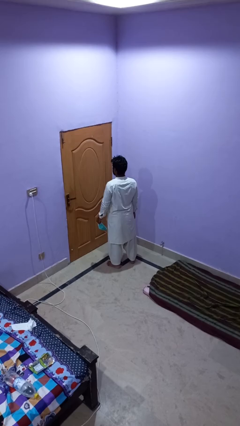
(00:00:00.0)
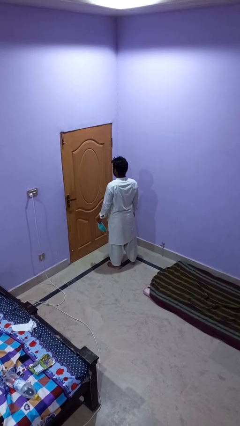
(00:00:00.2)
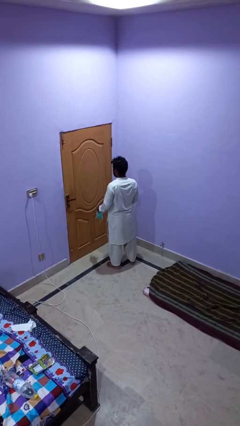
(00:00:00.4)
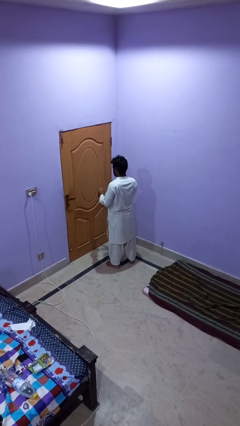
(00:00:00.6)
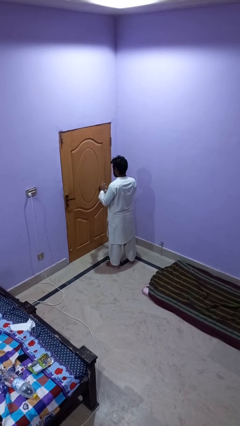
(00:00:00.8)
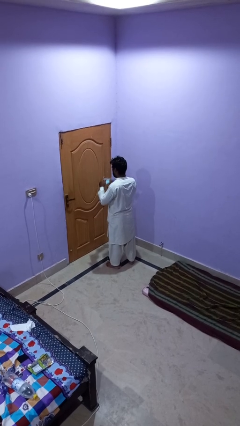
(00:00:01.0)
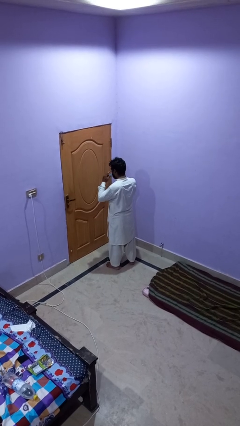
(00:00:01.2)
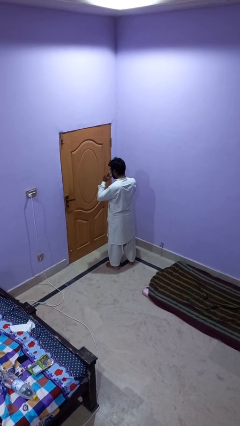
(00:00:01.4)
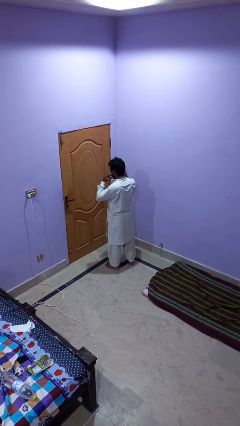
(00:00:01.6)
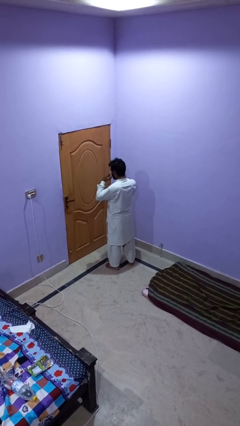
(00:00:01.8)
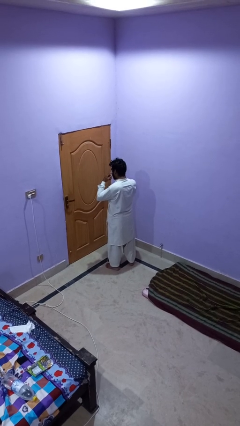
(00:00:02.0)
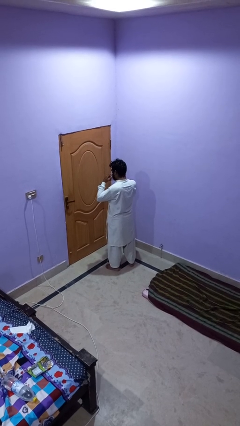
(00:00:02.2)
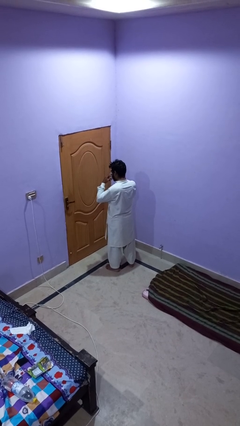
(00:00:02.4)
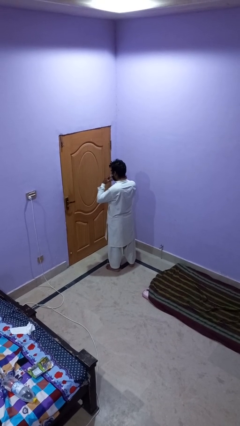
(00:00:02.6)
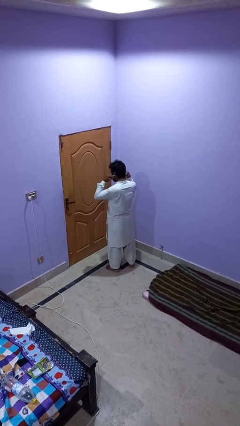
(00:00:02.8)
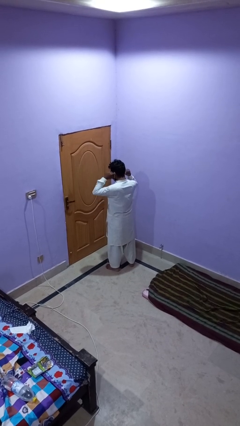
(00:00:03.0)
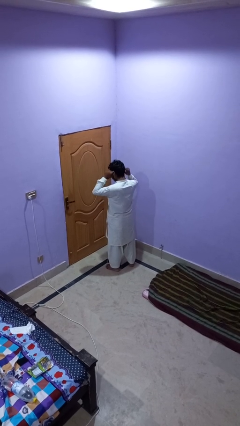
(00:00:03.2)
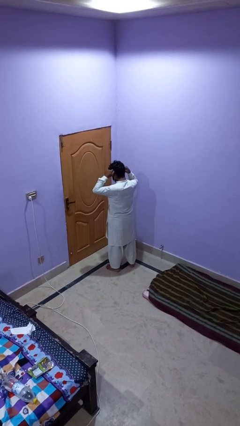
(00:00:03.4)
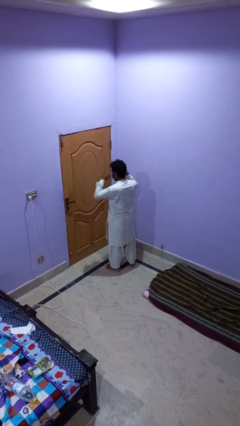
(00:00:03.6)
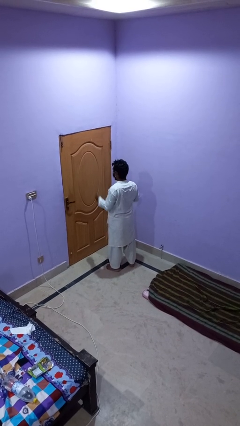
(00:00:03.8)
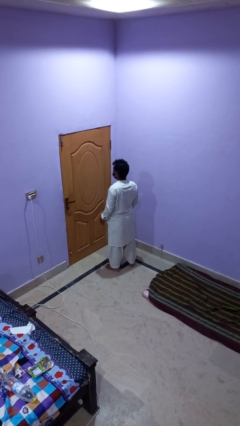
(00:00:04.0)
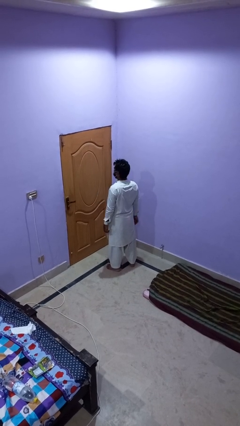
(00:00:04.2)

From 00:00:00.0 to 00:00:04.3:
person puts on facemask

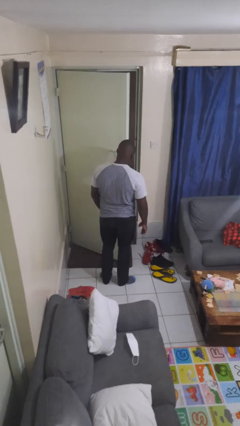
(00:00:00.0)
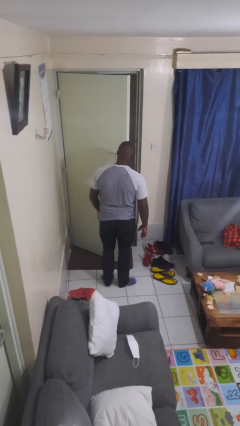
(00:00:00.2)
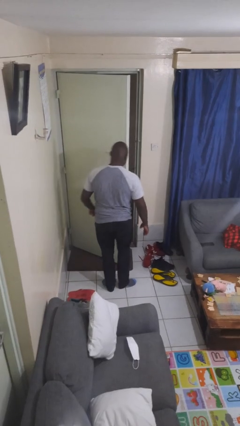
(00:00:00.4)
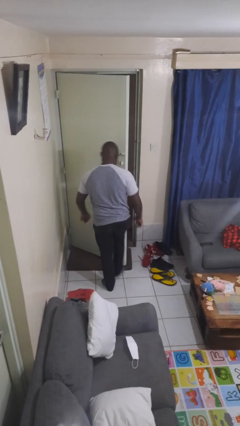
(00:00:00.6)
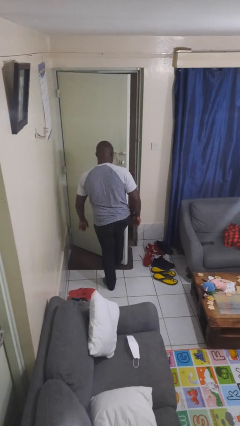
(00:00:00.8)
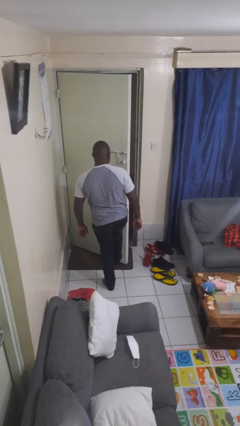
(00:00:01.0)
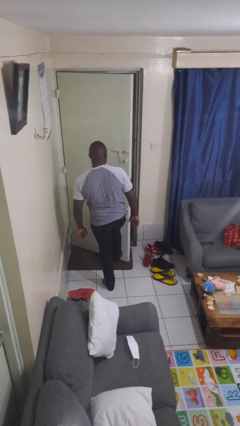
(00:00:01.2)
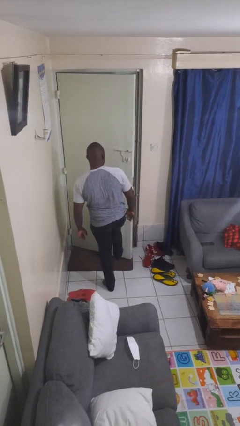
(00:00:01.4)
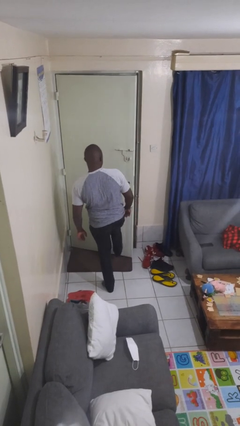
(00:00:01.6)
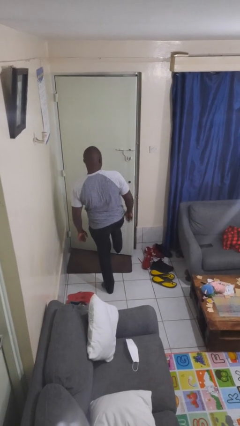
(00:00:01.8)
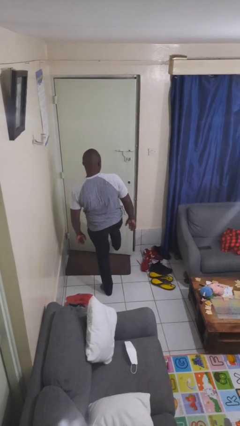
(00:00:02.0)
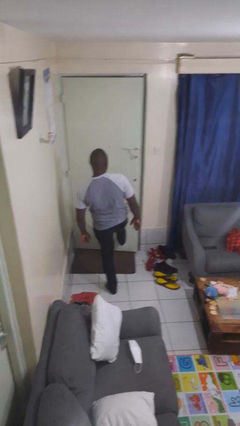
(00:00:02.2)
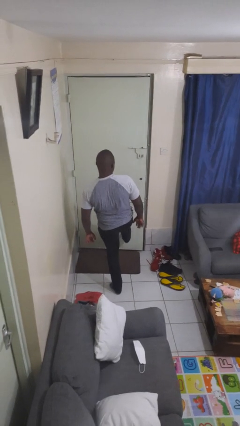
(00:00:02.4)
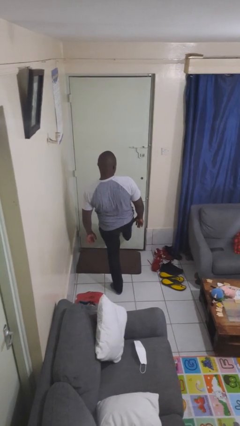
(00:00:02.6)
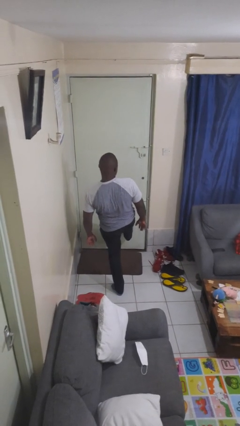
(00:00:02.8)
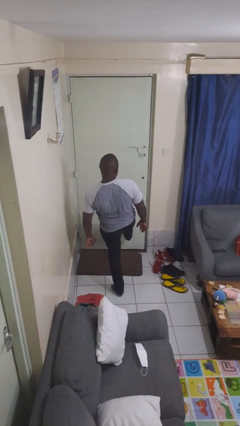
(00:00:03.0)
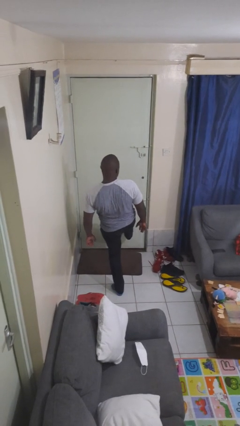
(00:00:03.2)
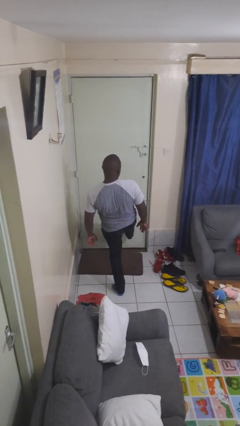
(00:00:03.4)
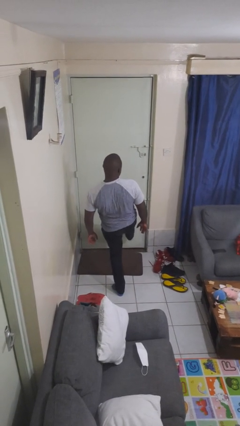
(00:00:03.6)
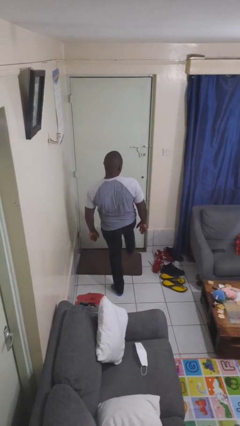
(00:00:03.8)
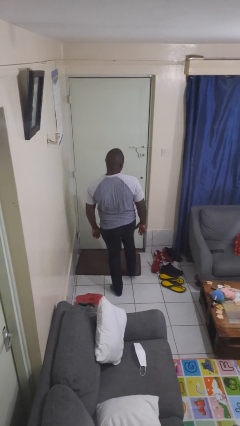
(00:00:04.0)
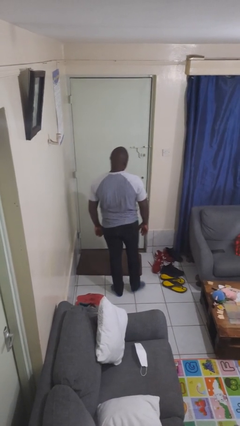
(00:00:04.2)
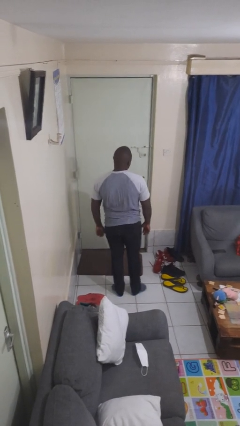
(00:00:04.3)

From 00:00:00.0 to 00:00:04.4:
person closes door with foot

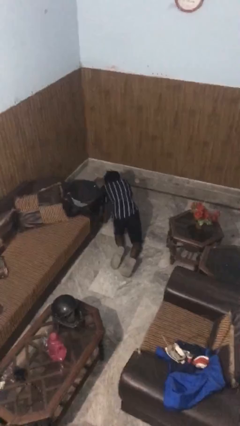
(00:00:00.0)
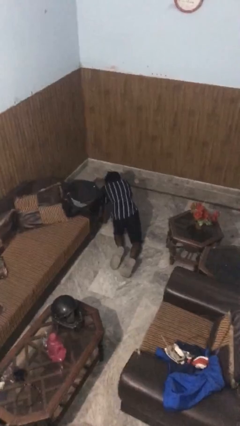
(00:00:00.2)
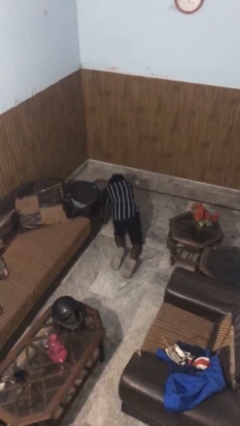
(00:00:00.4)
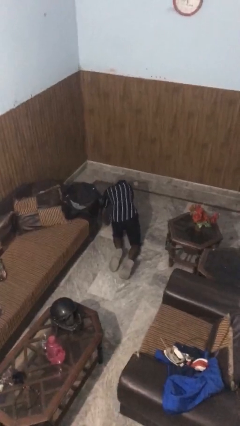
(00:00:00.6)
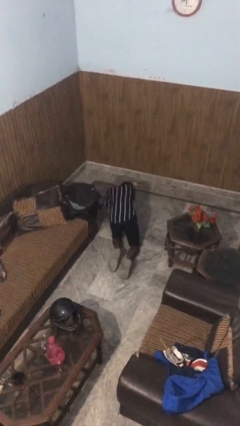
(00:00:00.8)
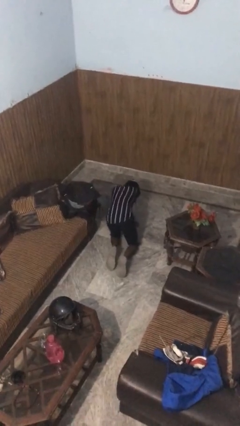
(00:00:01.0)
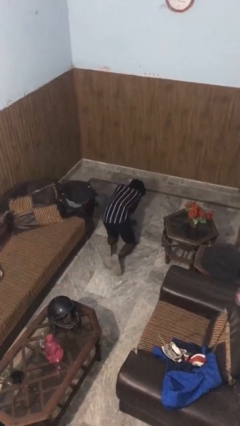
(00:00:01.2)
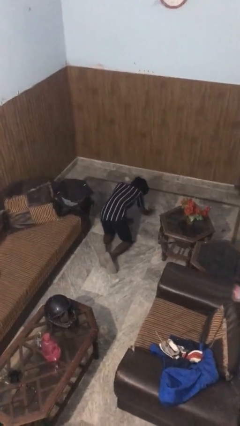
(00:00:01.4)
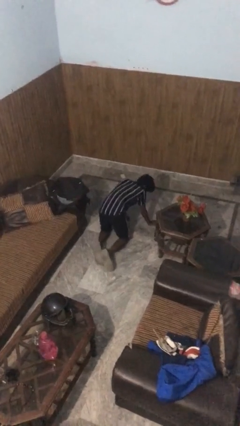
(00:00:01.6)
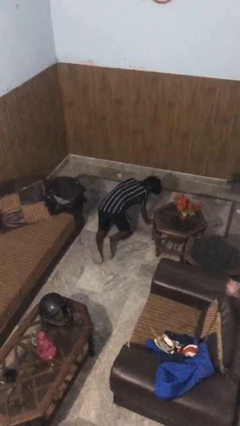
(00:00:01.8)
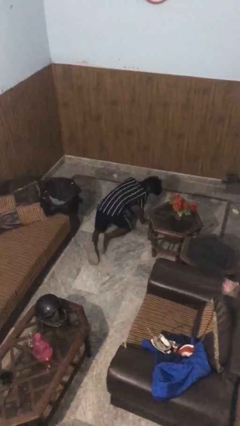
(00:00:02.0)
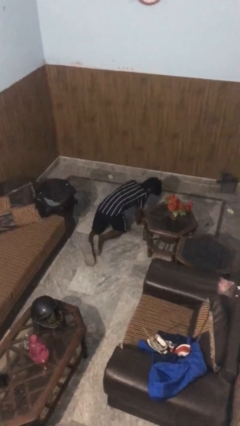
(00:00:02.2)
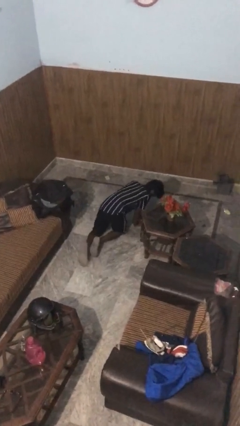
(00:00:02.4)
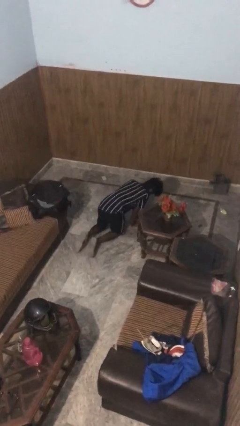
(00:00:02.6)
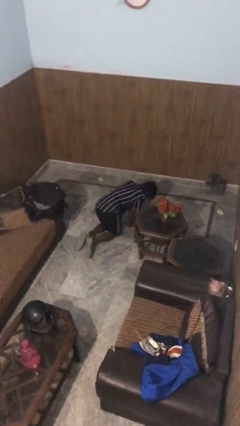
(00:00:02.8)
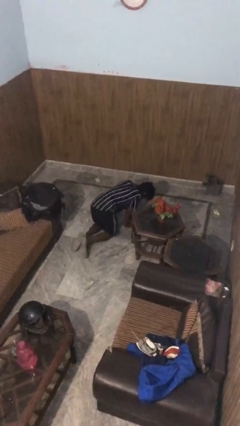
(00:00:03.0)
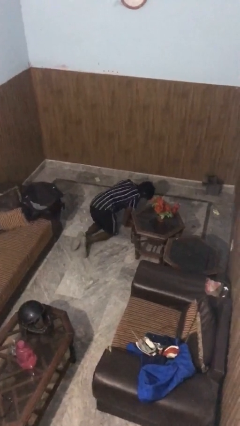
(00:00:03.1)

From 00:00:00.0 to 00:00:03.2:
person crawls

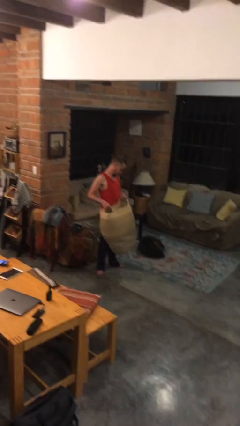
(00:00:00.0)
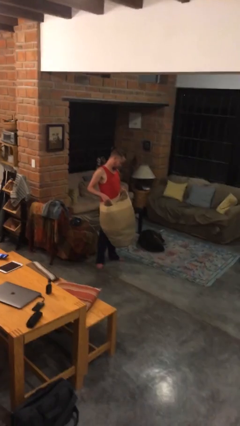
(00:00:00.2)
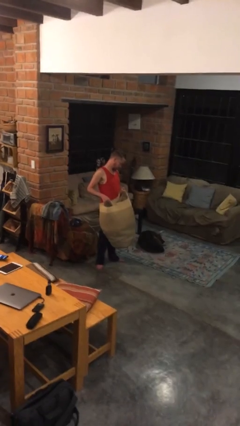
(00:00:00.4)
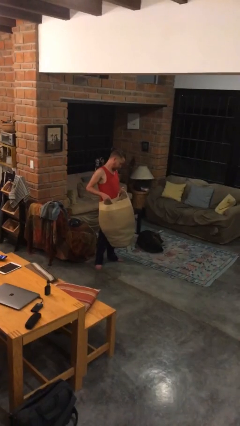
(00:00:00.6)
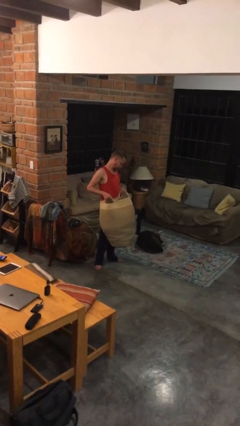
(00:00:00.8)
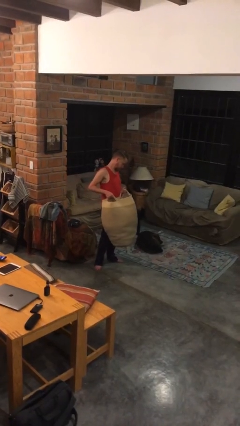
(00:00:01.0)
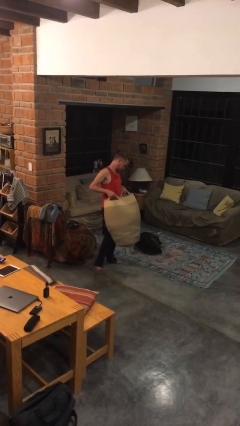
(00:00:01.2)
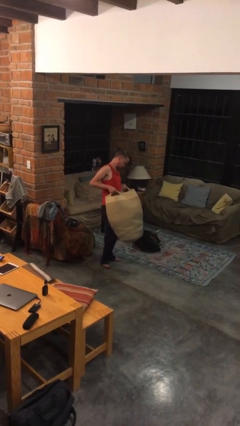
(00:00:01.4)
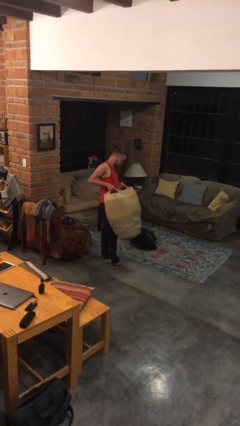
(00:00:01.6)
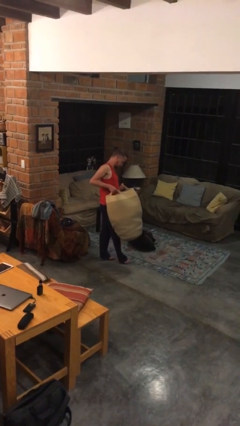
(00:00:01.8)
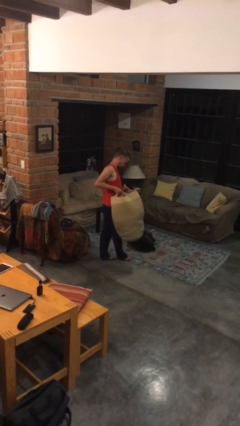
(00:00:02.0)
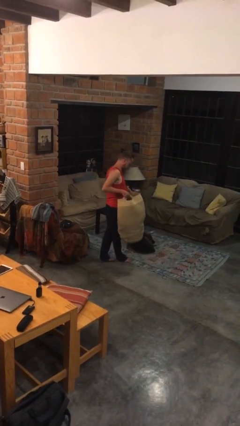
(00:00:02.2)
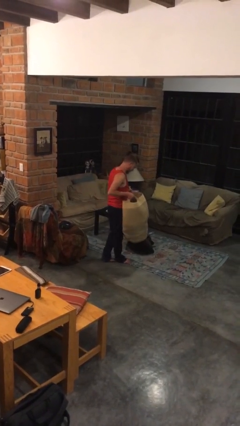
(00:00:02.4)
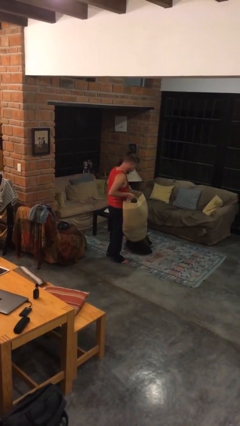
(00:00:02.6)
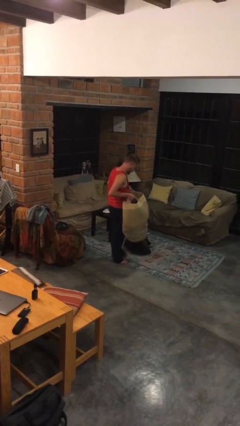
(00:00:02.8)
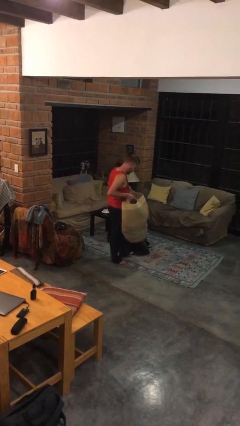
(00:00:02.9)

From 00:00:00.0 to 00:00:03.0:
person carries laundry basket

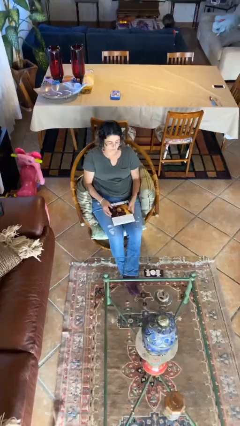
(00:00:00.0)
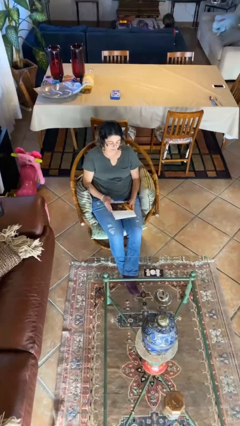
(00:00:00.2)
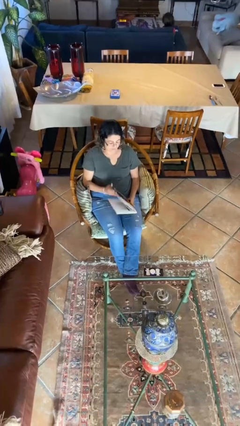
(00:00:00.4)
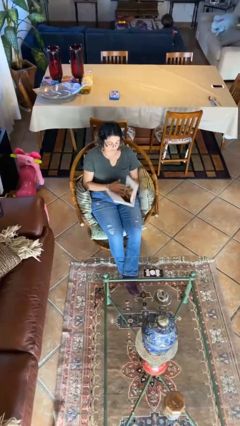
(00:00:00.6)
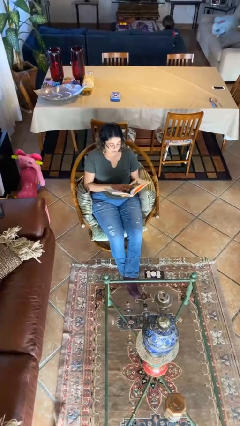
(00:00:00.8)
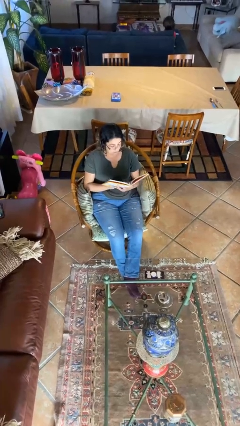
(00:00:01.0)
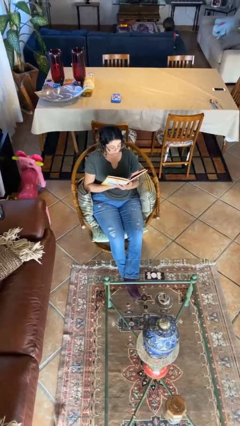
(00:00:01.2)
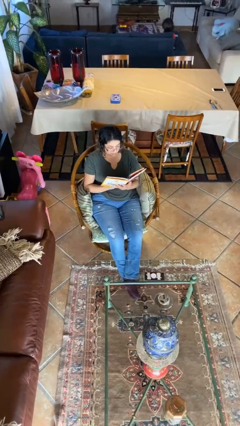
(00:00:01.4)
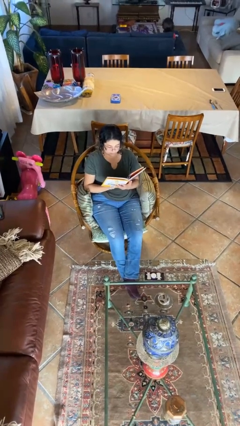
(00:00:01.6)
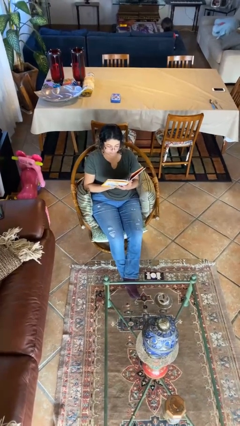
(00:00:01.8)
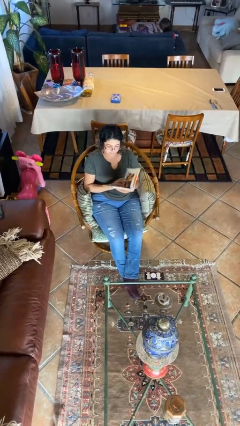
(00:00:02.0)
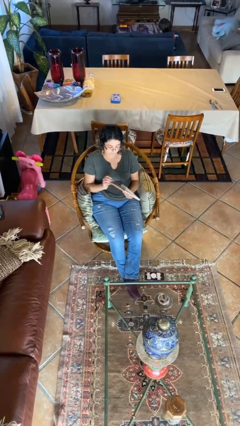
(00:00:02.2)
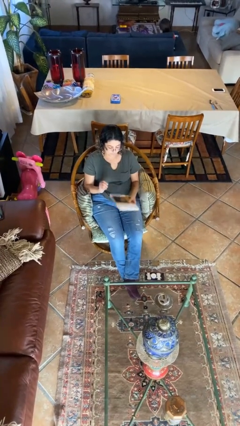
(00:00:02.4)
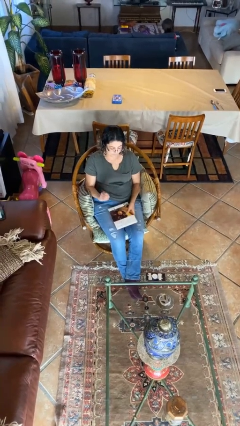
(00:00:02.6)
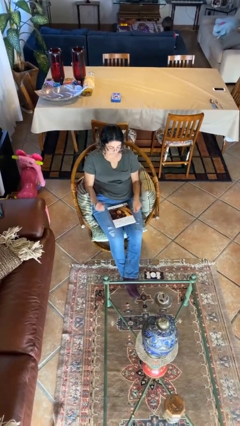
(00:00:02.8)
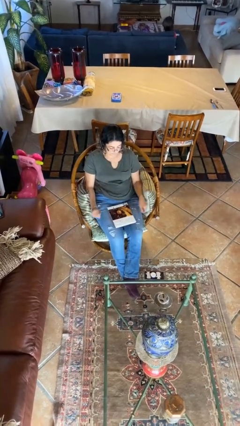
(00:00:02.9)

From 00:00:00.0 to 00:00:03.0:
person reads document
